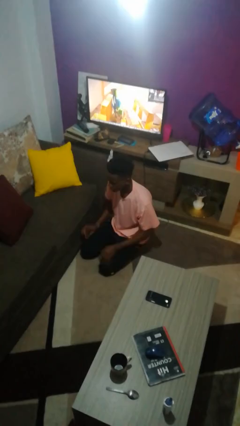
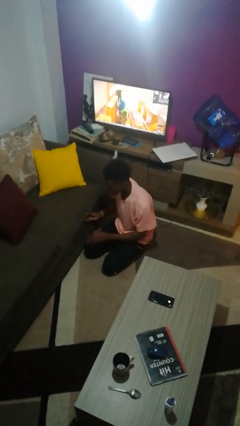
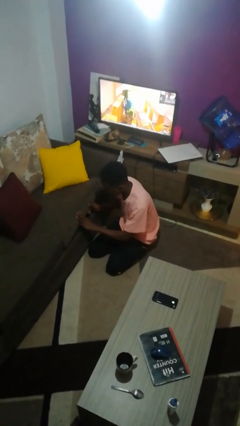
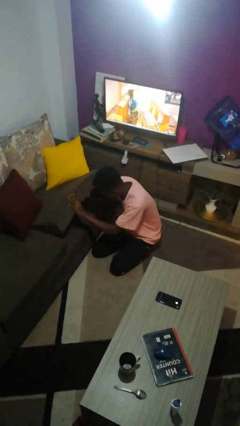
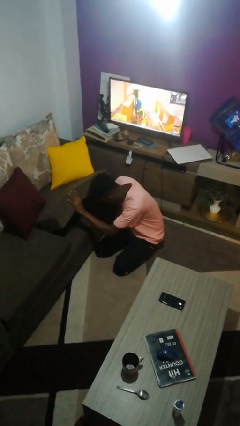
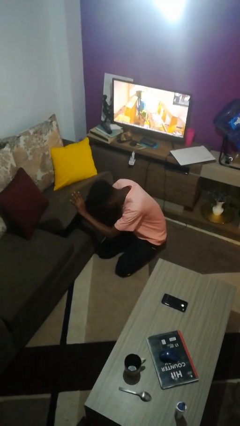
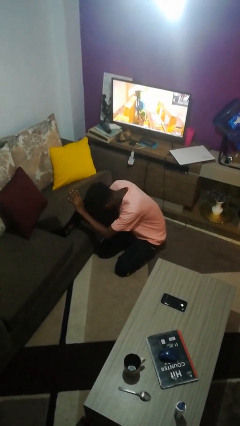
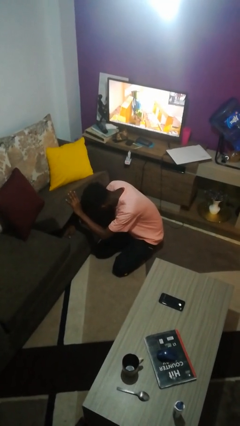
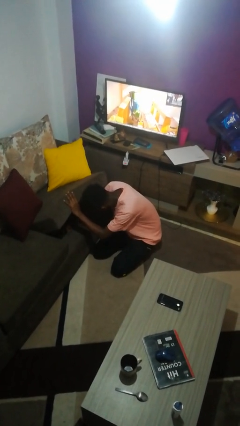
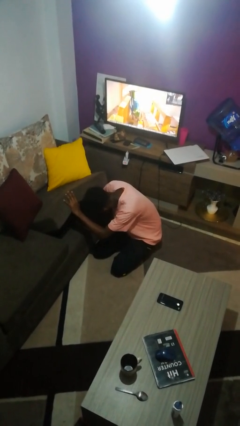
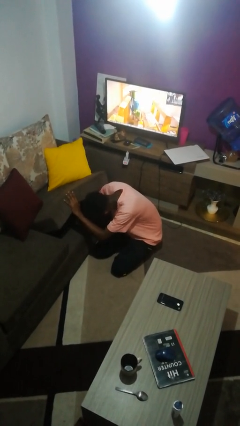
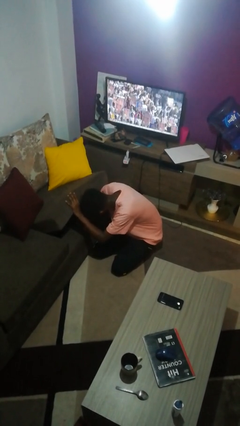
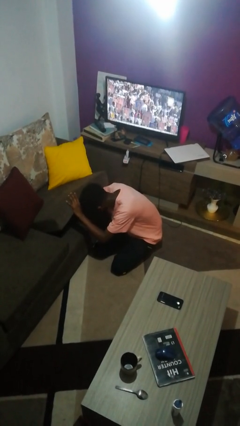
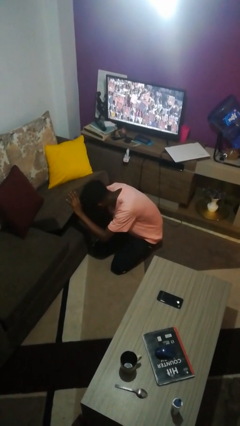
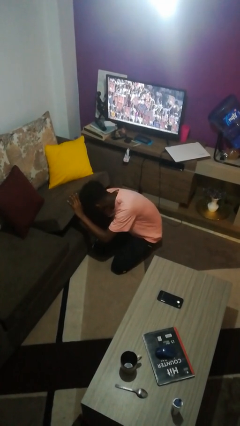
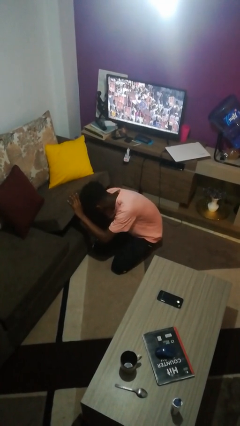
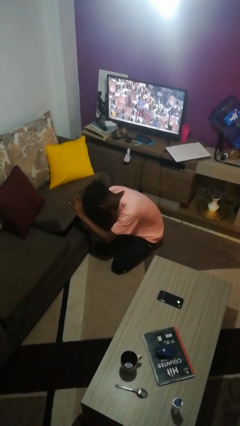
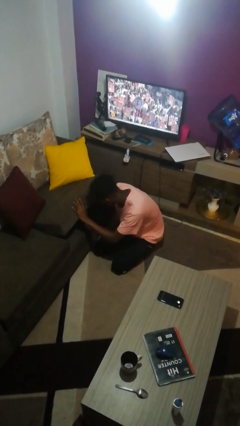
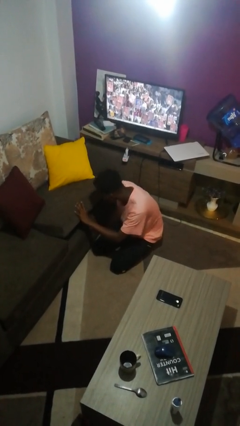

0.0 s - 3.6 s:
person searches under couch

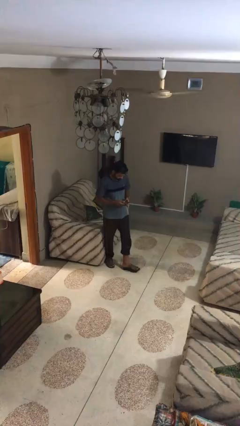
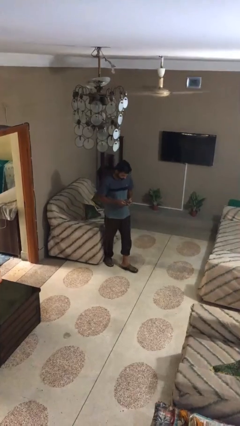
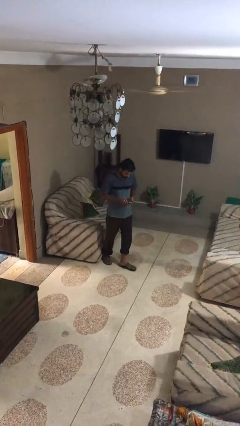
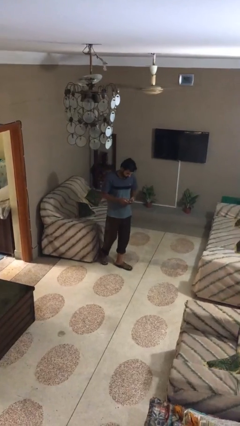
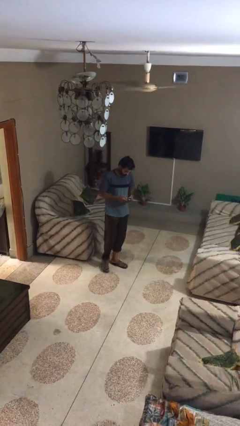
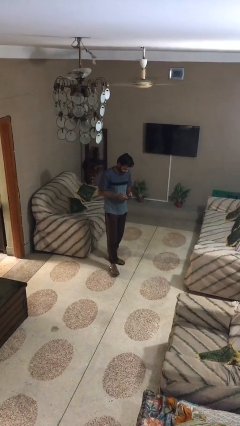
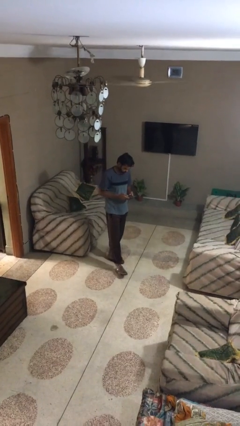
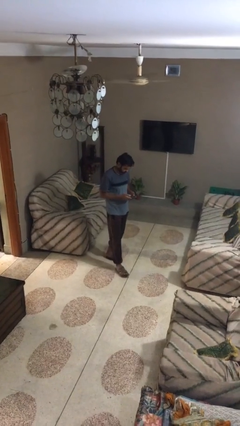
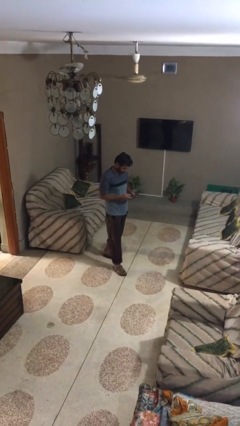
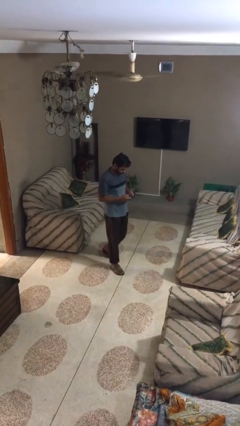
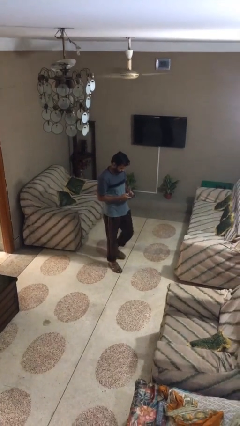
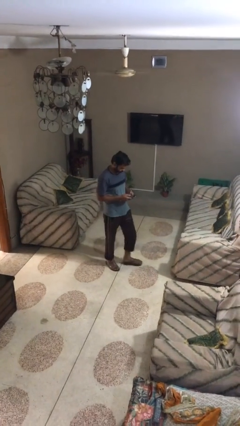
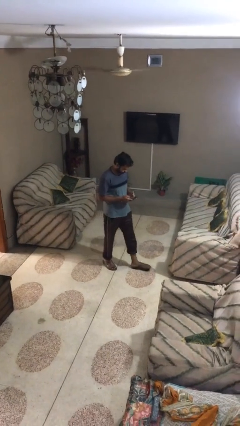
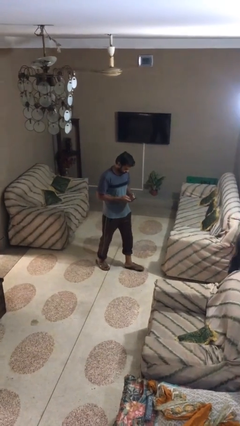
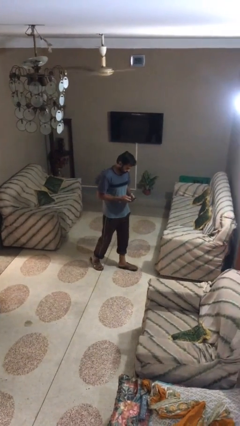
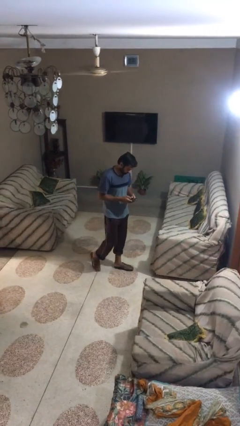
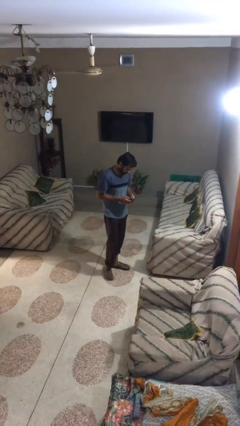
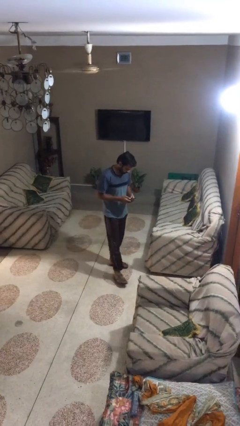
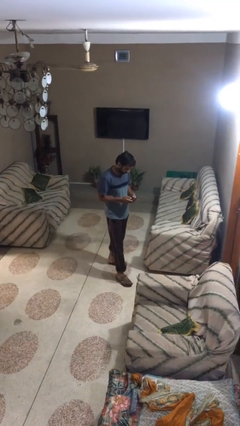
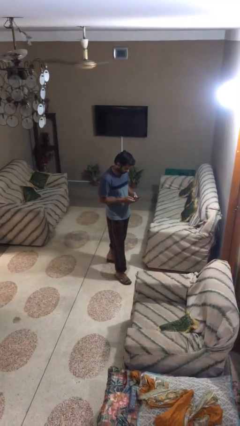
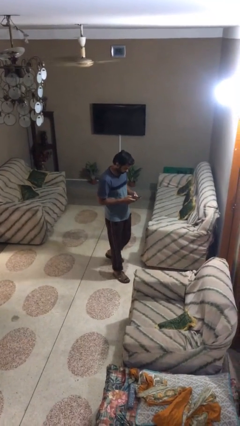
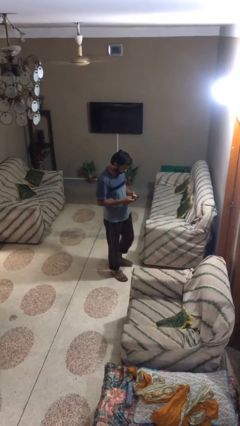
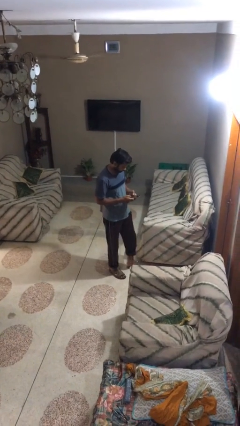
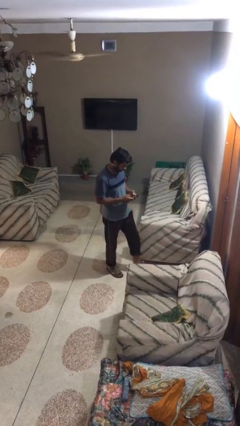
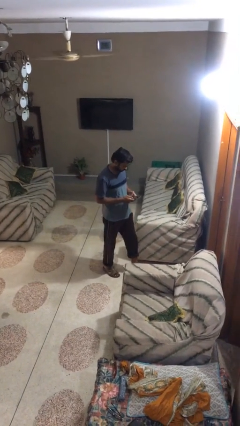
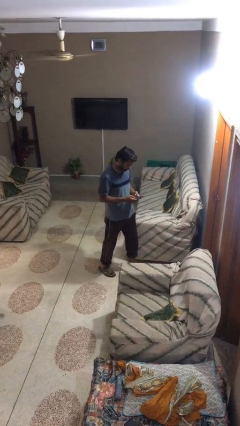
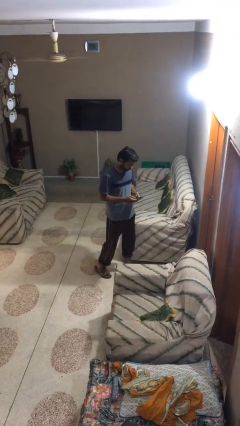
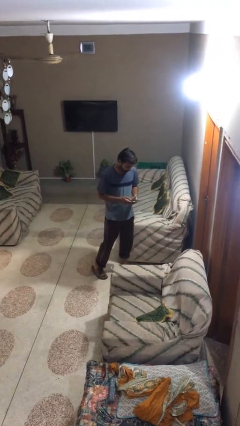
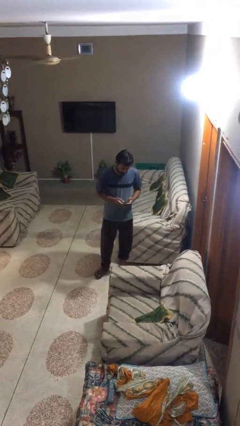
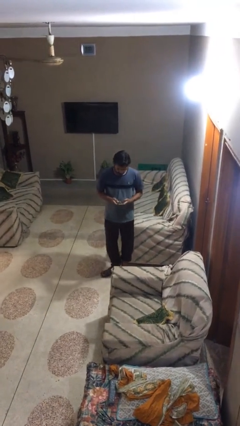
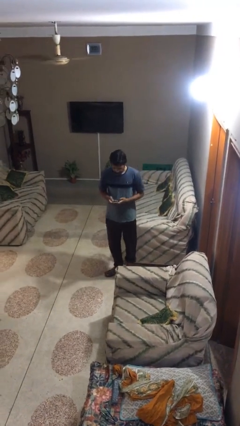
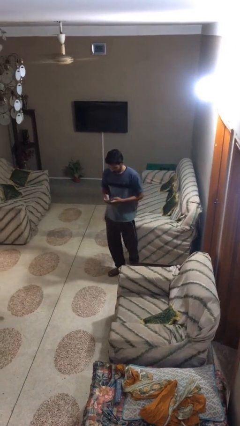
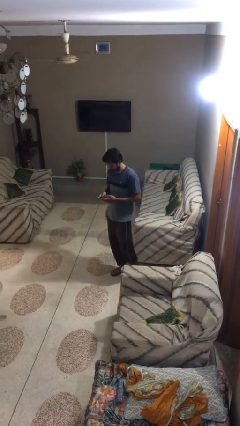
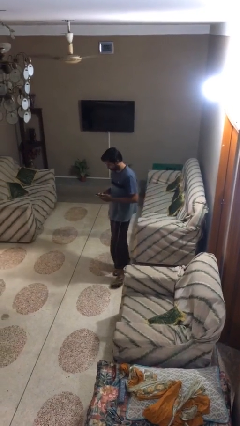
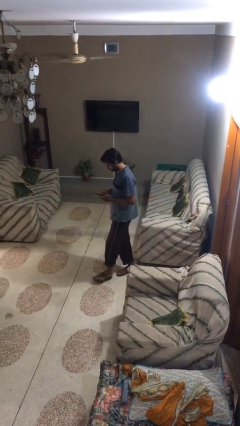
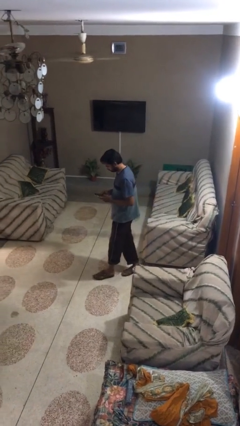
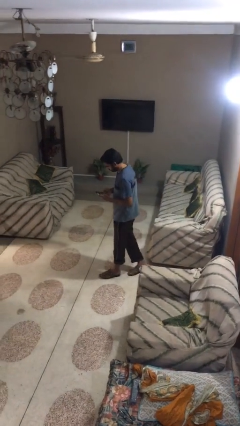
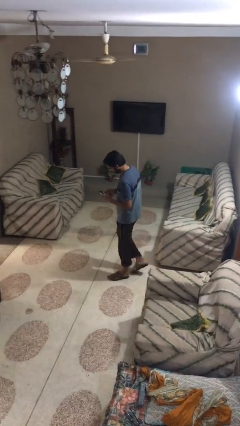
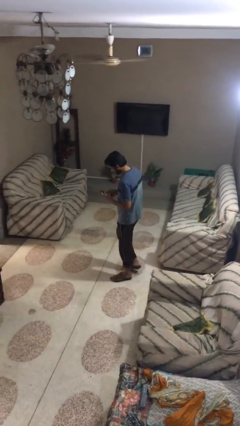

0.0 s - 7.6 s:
person texts on phone

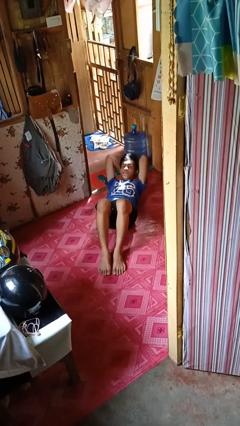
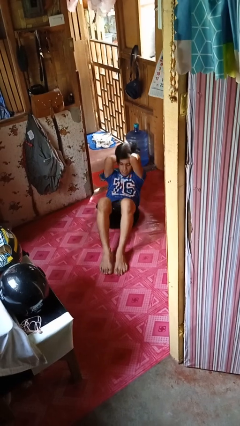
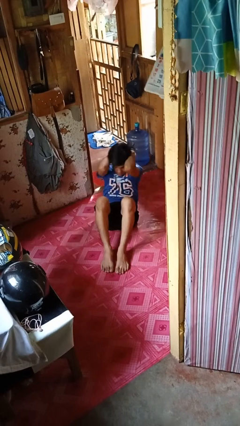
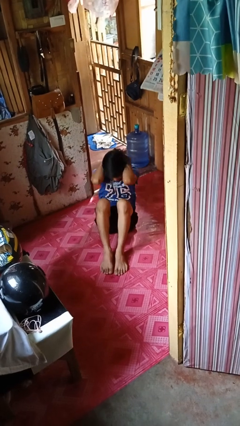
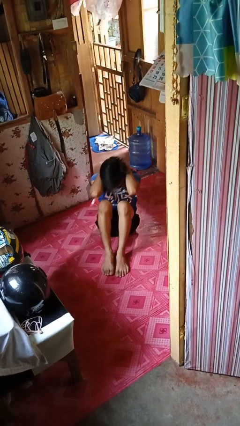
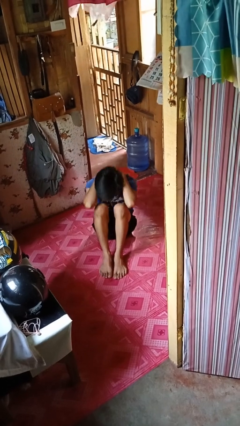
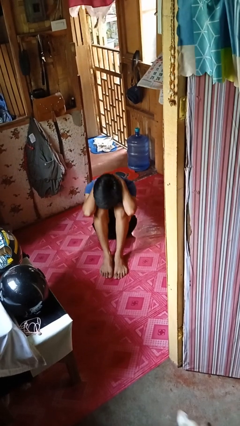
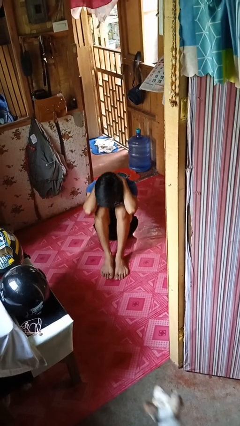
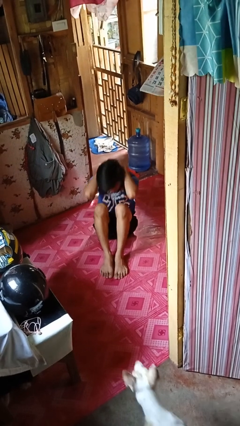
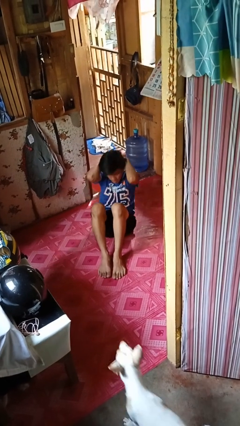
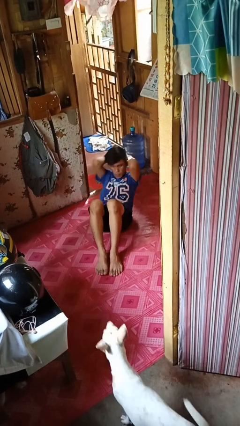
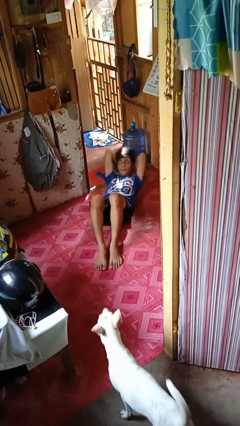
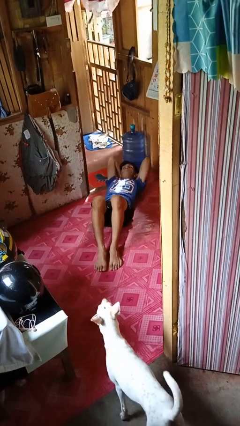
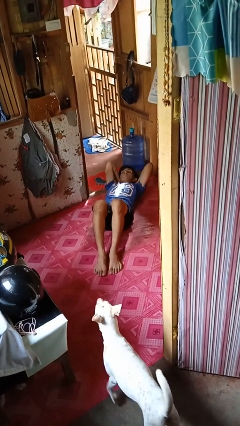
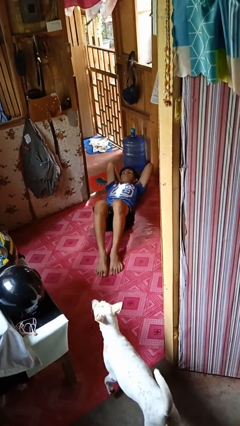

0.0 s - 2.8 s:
person exercises with situp

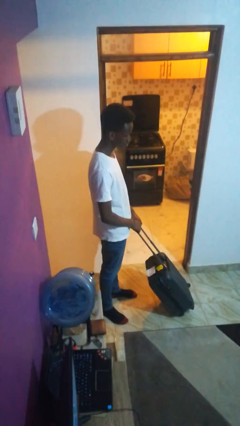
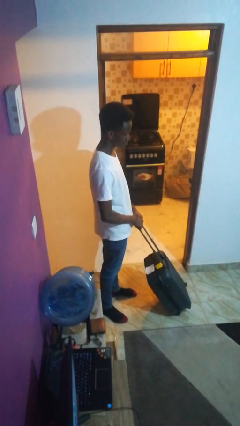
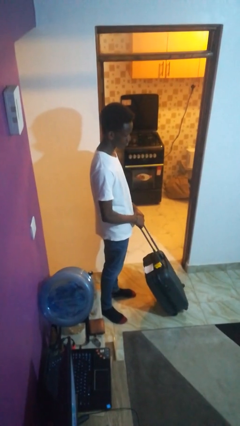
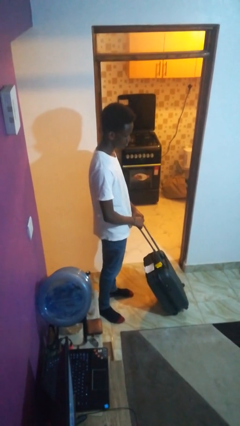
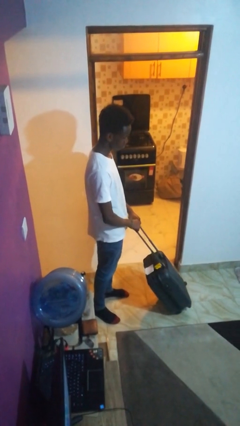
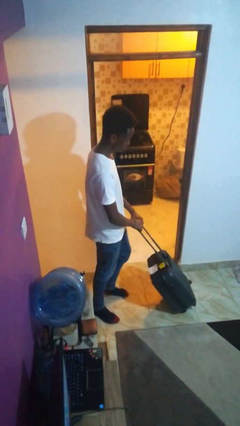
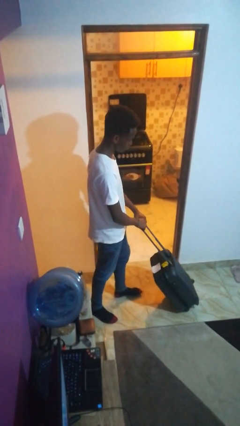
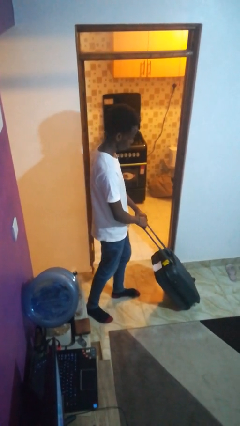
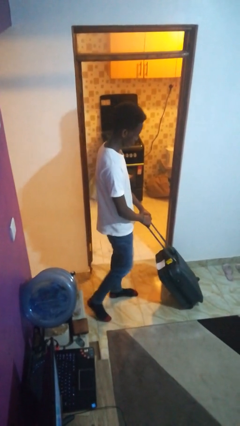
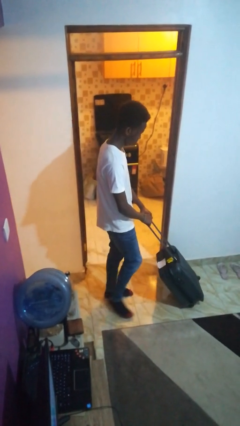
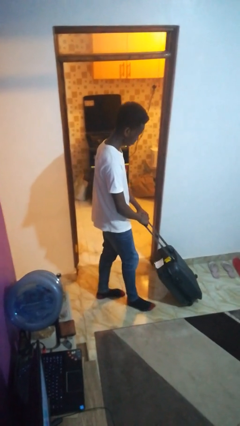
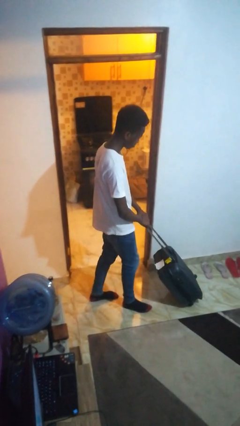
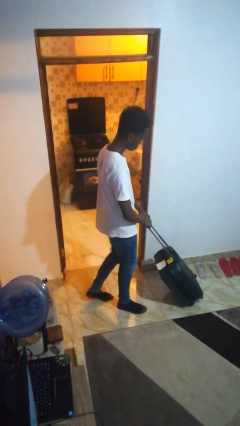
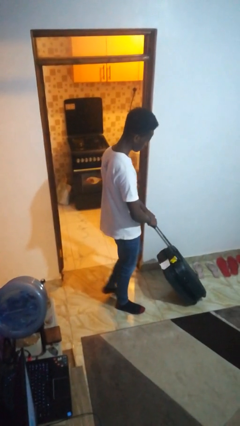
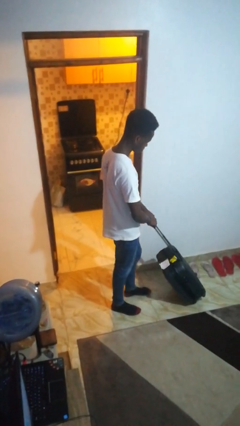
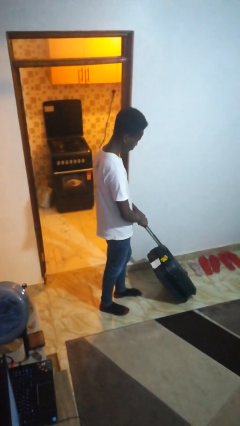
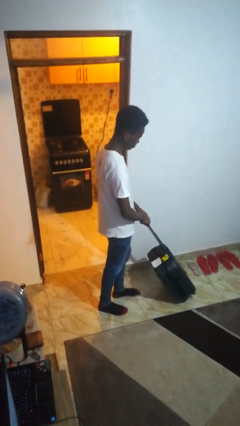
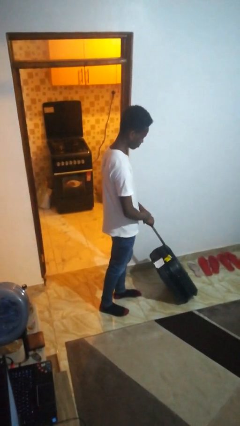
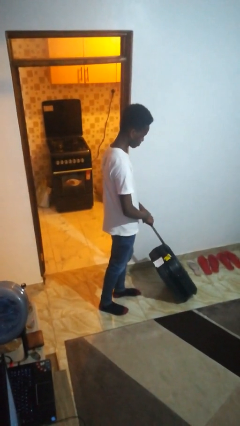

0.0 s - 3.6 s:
person pushes wheeled cart
